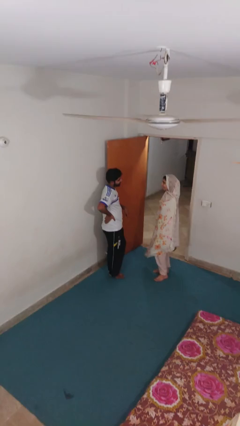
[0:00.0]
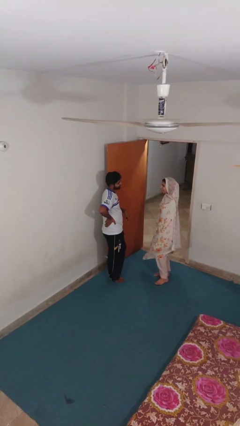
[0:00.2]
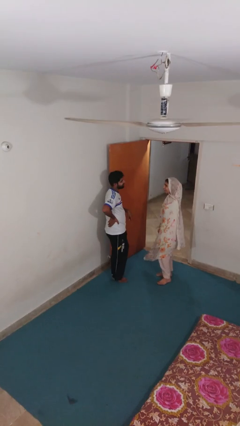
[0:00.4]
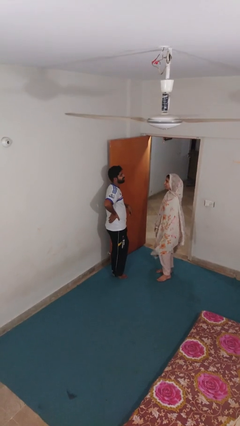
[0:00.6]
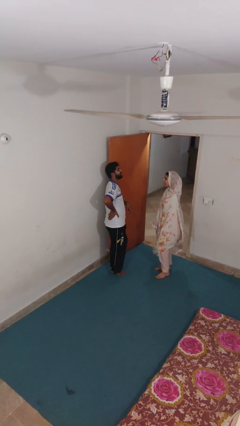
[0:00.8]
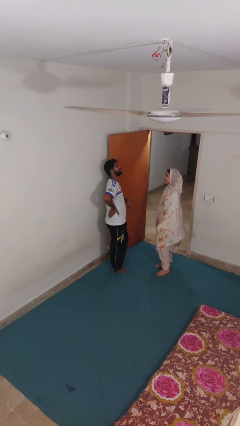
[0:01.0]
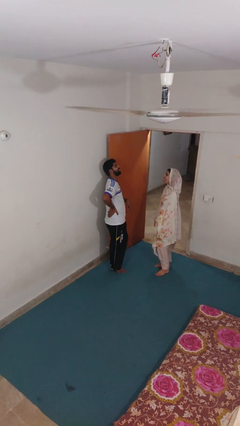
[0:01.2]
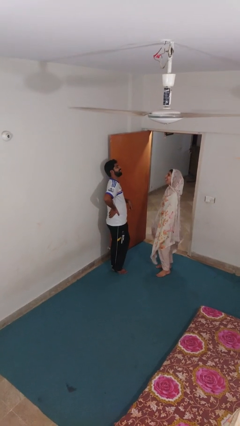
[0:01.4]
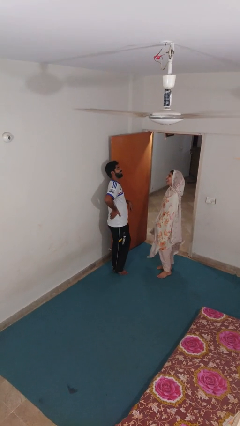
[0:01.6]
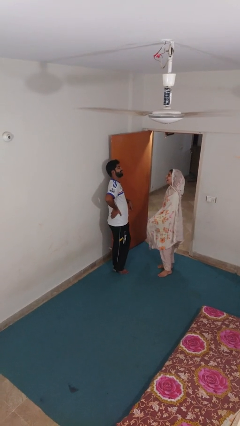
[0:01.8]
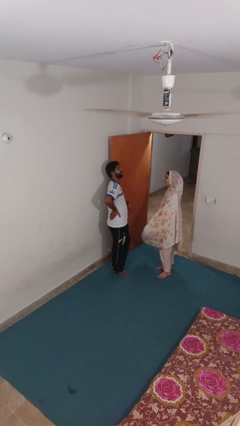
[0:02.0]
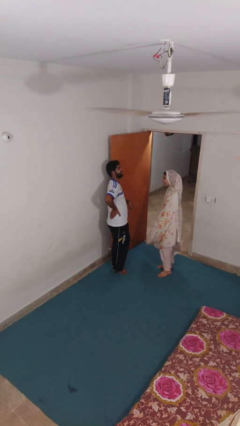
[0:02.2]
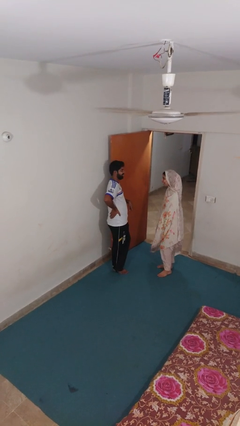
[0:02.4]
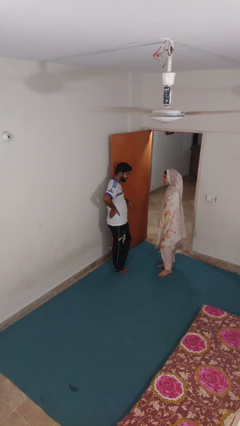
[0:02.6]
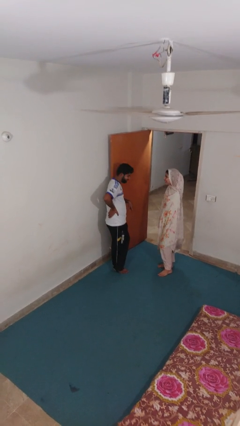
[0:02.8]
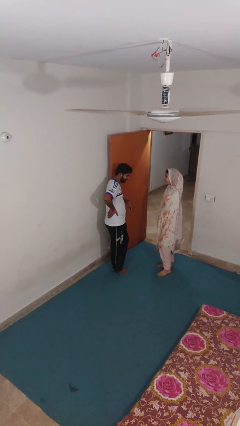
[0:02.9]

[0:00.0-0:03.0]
person laughs with person

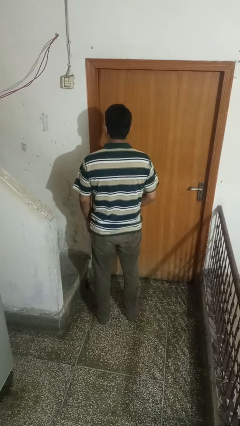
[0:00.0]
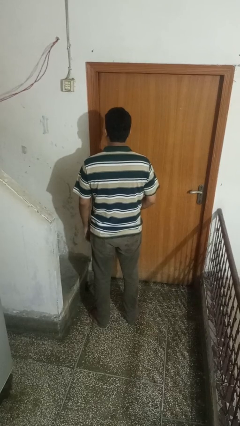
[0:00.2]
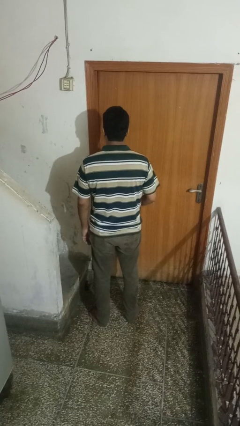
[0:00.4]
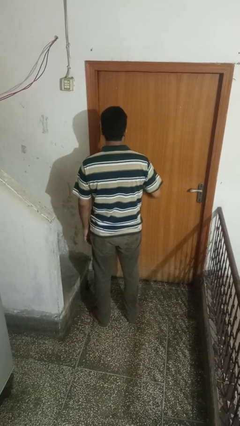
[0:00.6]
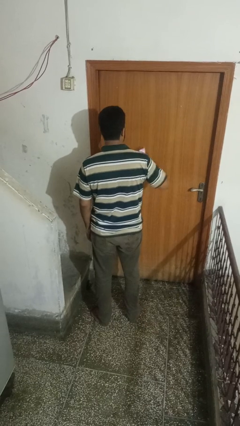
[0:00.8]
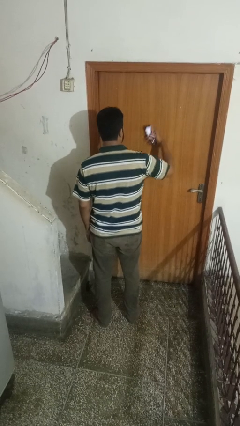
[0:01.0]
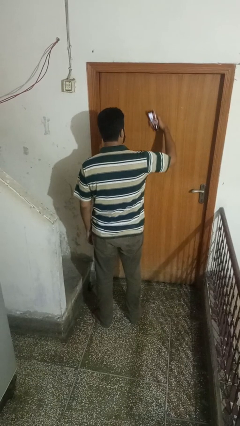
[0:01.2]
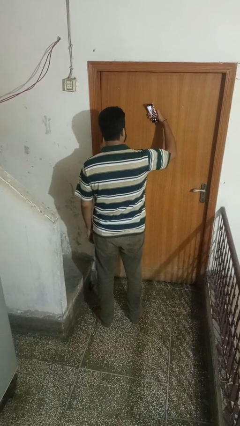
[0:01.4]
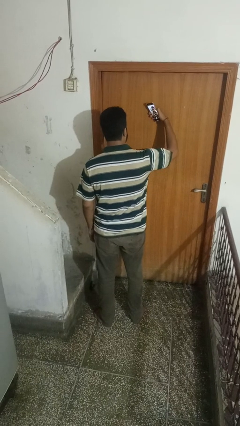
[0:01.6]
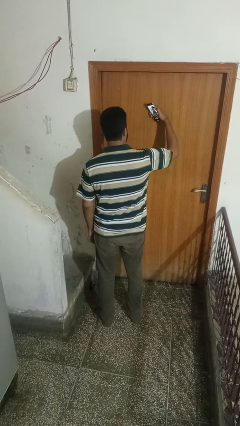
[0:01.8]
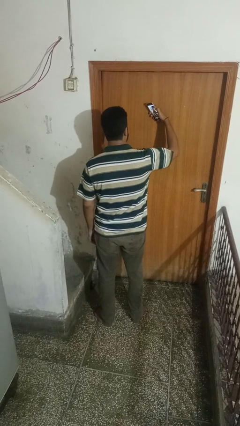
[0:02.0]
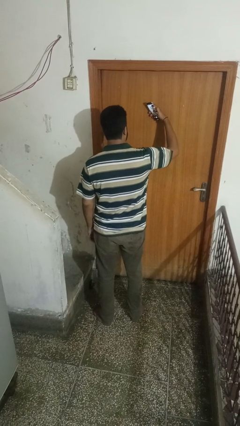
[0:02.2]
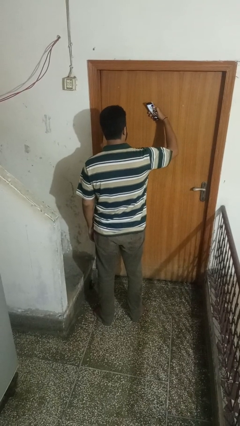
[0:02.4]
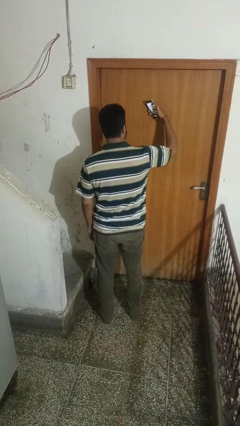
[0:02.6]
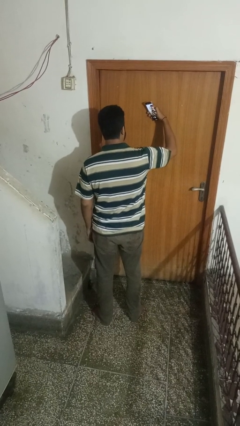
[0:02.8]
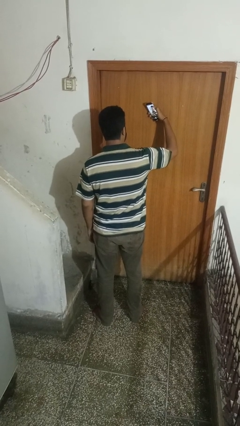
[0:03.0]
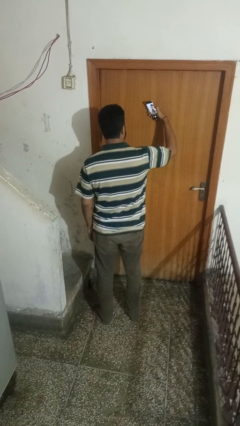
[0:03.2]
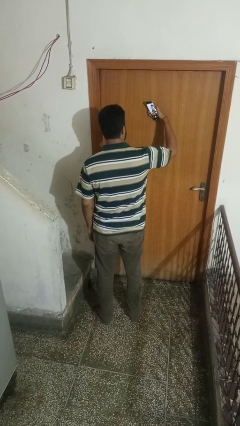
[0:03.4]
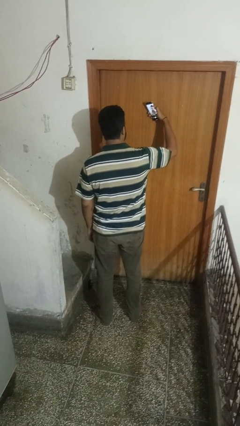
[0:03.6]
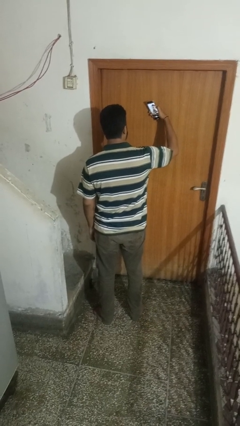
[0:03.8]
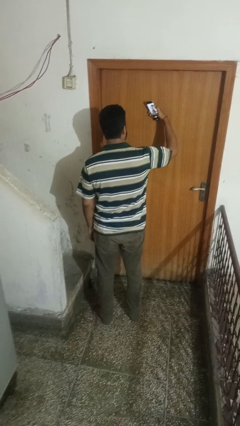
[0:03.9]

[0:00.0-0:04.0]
person takes selfie

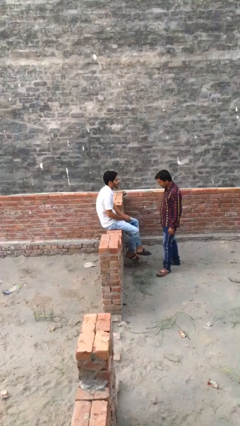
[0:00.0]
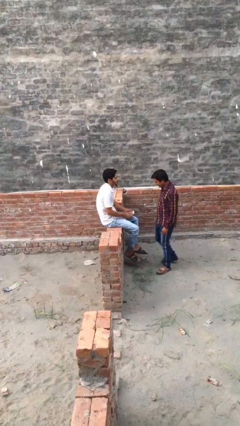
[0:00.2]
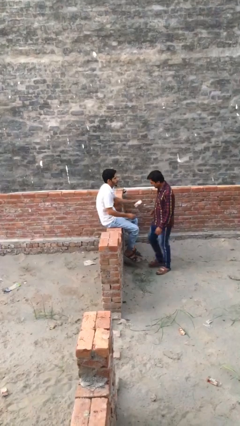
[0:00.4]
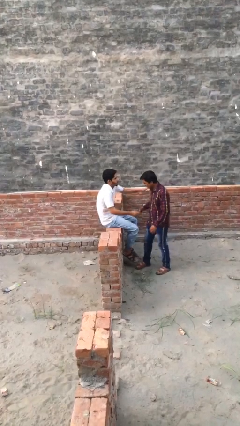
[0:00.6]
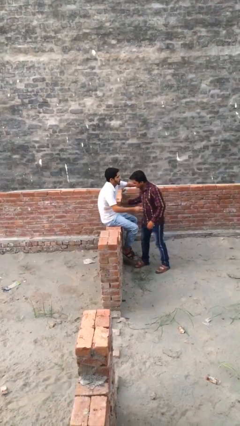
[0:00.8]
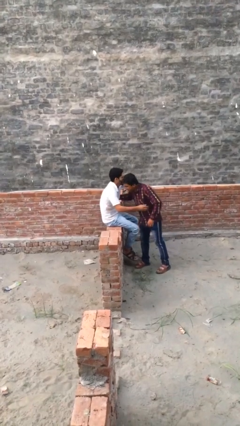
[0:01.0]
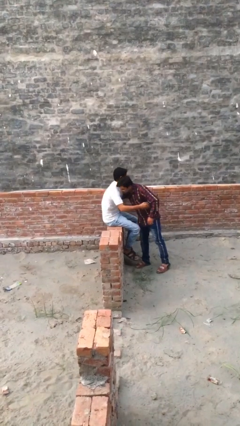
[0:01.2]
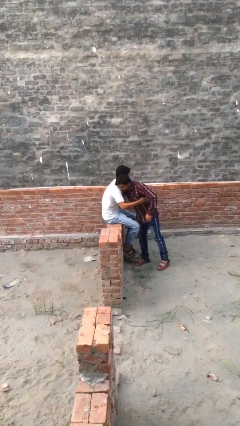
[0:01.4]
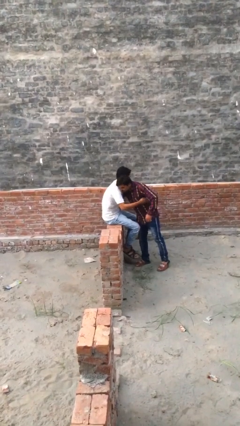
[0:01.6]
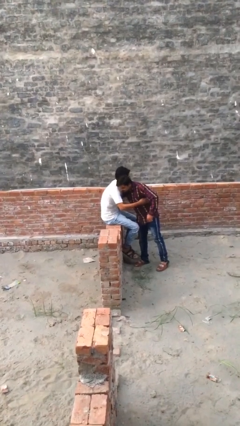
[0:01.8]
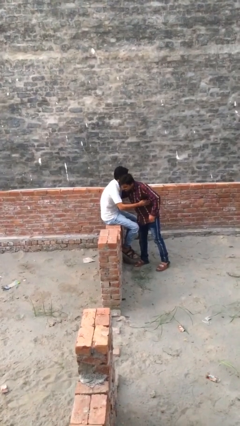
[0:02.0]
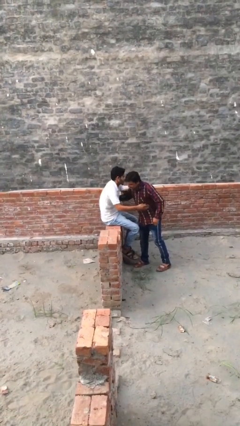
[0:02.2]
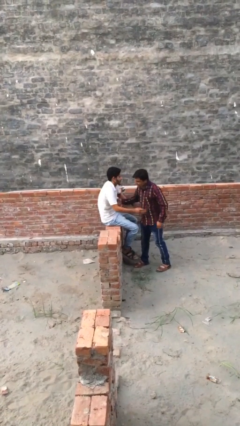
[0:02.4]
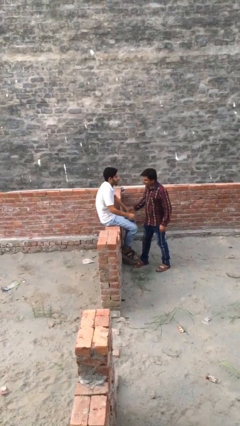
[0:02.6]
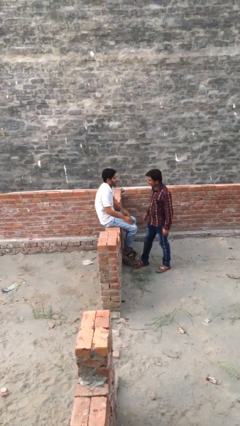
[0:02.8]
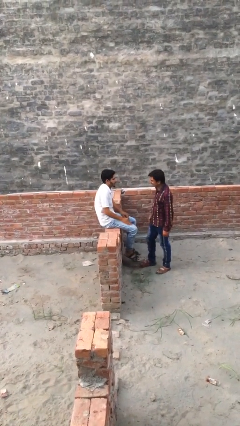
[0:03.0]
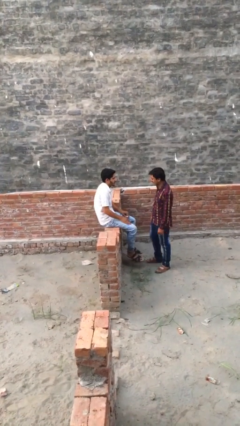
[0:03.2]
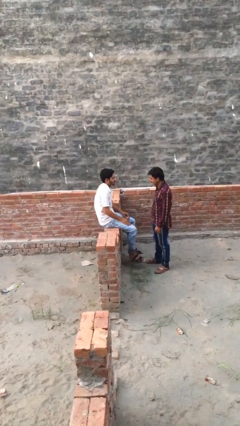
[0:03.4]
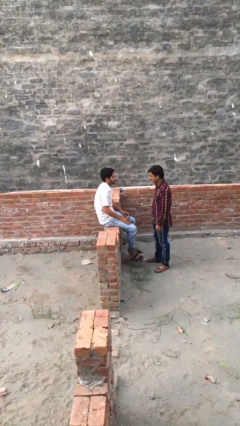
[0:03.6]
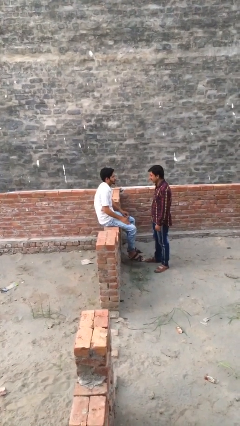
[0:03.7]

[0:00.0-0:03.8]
person embraces person

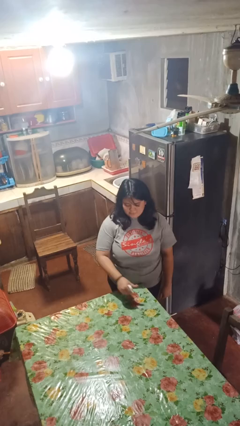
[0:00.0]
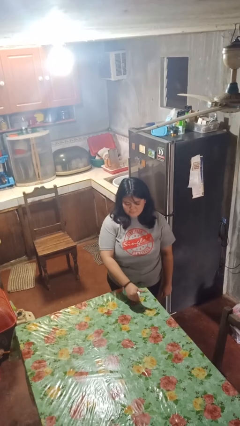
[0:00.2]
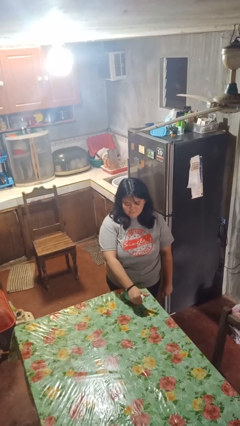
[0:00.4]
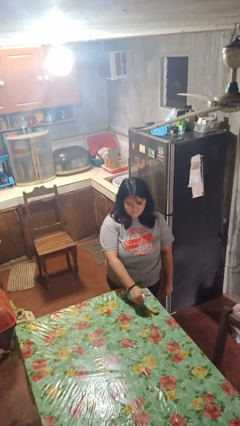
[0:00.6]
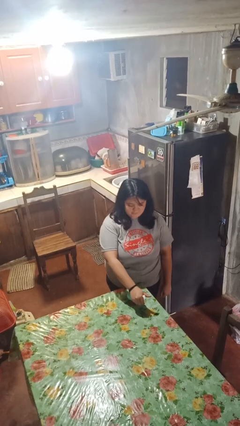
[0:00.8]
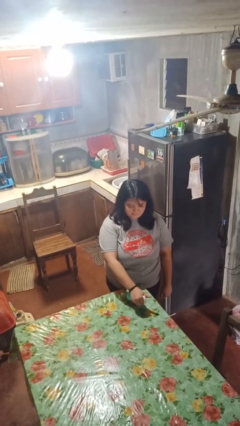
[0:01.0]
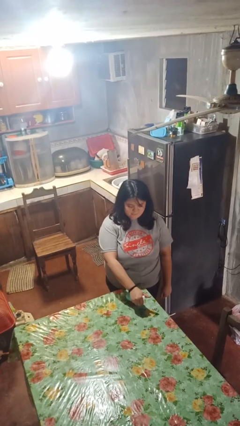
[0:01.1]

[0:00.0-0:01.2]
person sprays from bottle

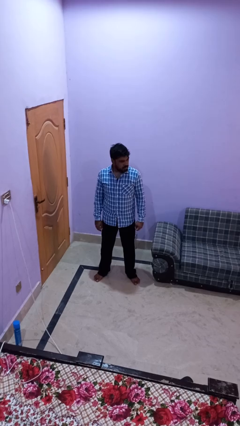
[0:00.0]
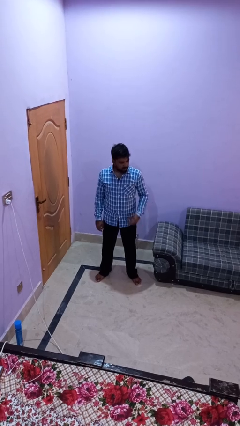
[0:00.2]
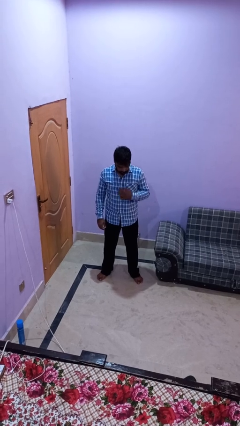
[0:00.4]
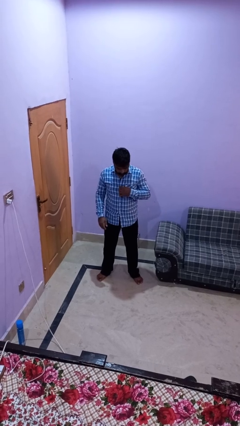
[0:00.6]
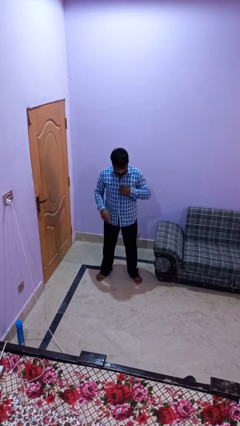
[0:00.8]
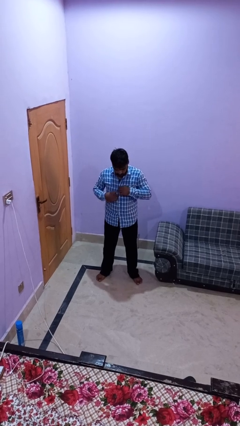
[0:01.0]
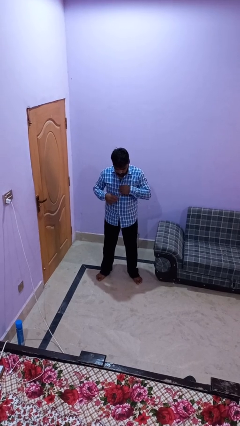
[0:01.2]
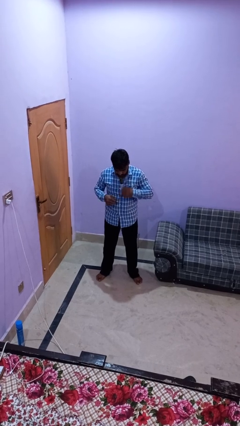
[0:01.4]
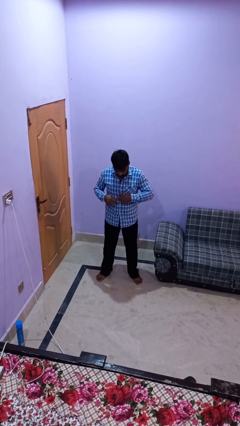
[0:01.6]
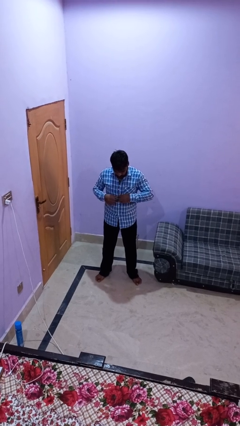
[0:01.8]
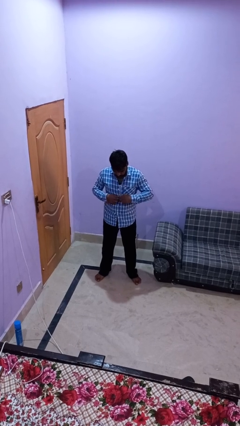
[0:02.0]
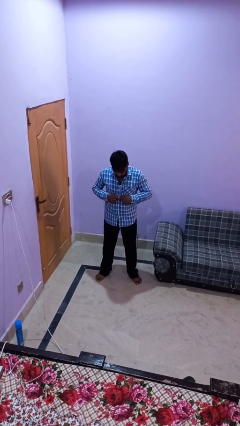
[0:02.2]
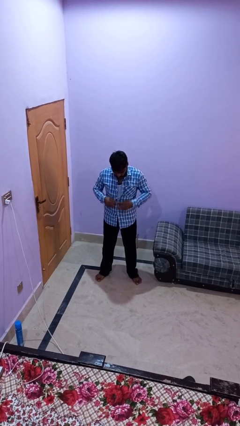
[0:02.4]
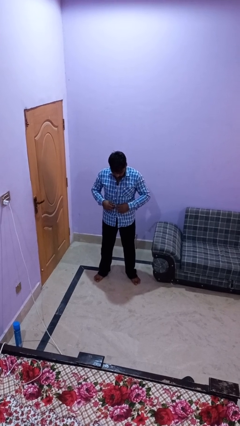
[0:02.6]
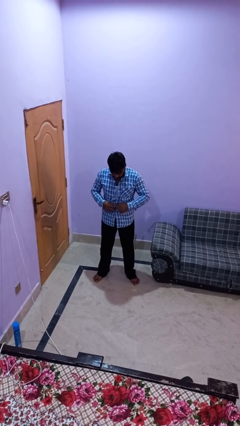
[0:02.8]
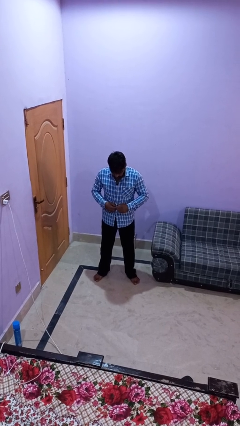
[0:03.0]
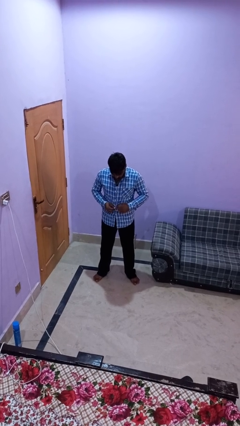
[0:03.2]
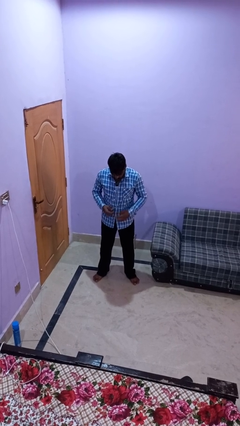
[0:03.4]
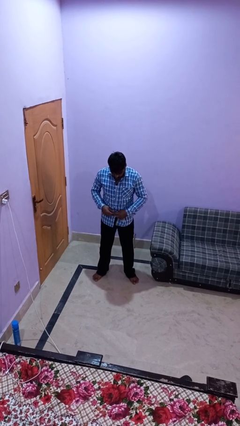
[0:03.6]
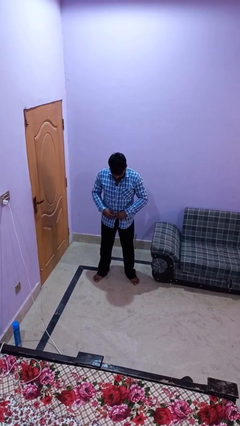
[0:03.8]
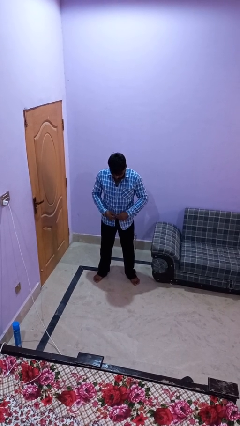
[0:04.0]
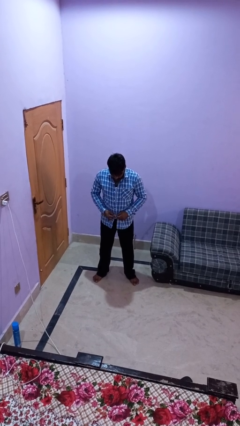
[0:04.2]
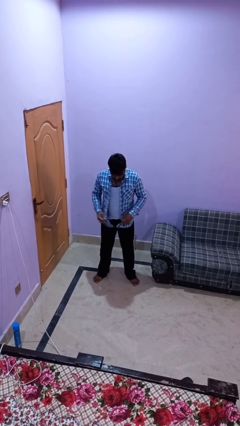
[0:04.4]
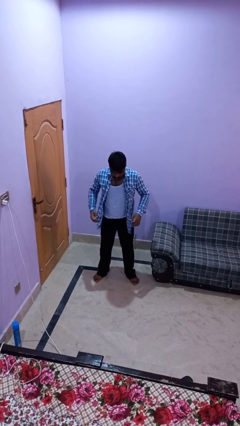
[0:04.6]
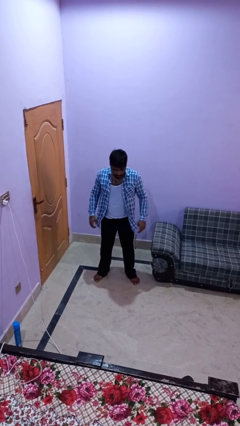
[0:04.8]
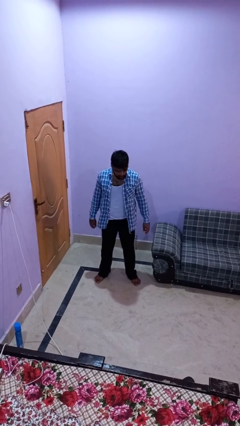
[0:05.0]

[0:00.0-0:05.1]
person unbuttons shirt

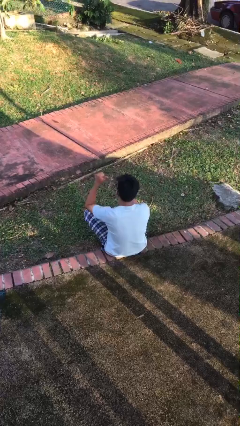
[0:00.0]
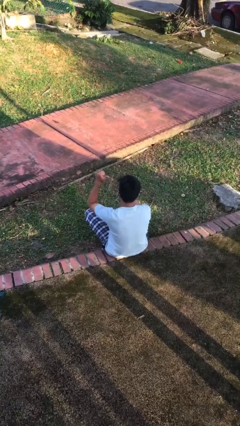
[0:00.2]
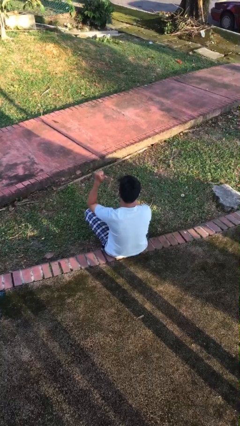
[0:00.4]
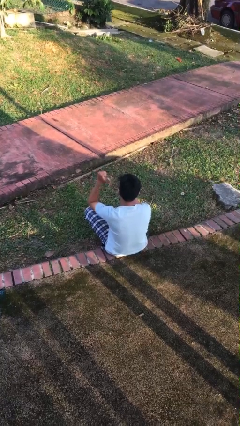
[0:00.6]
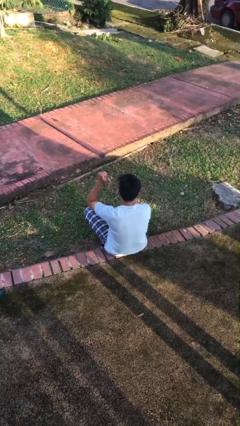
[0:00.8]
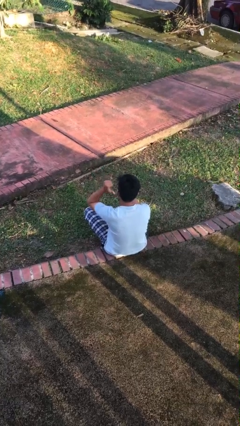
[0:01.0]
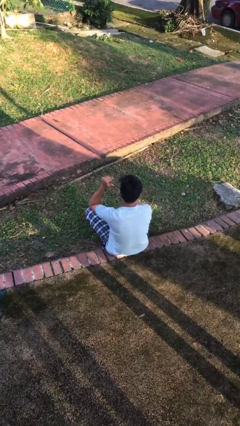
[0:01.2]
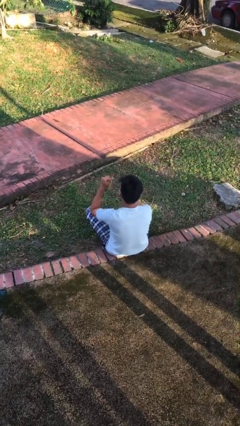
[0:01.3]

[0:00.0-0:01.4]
person gestures behind me
